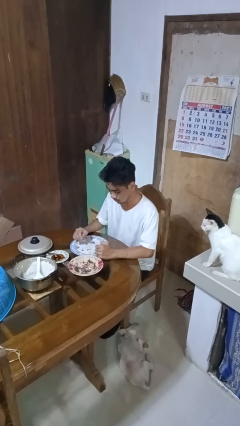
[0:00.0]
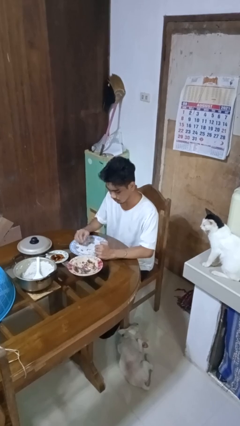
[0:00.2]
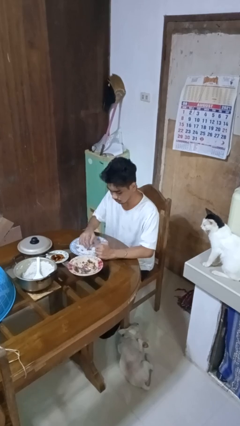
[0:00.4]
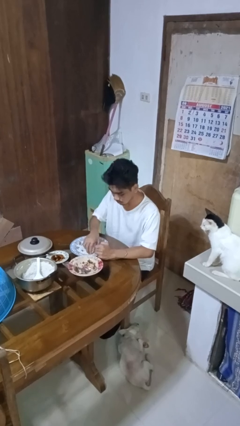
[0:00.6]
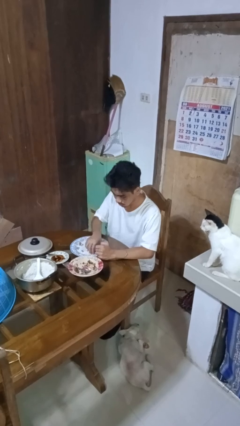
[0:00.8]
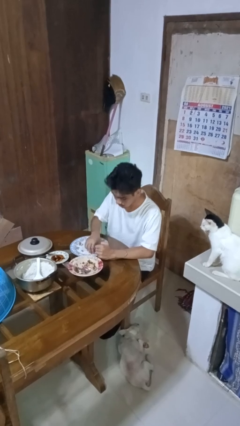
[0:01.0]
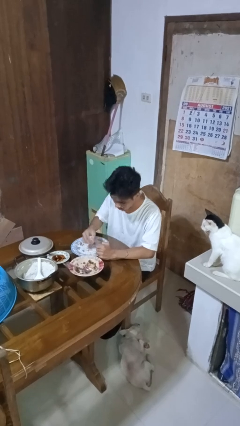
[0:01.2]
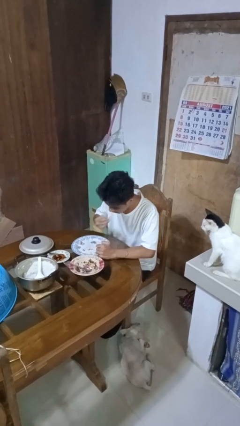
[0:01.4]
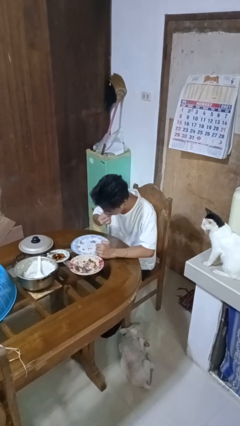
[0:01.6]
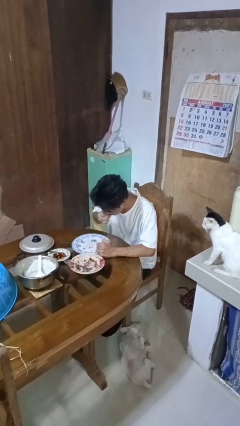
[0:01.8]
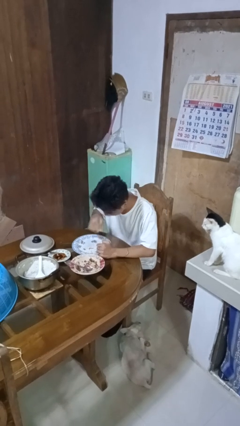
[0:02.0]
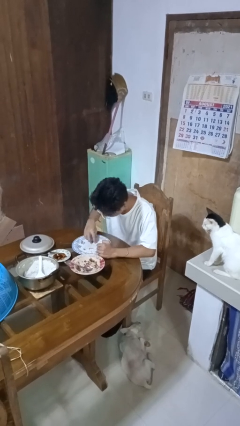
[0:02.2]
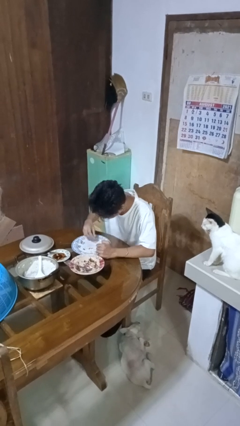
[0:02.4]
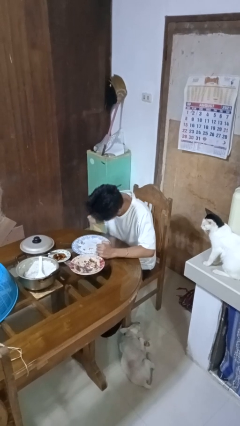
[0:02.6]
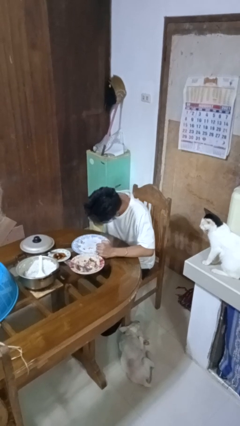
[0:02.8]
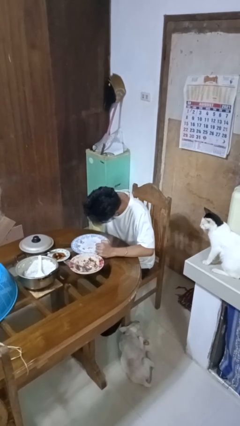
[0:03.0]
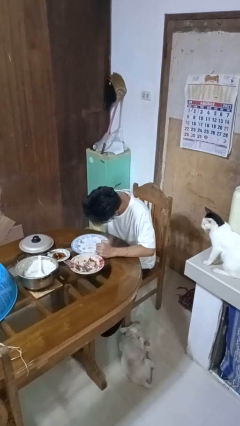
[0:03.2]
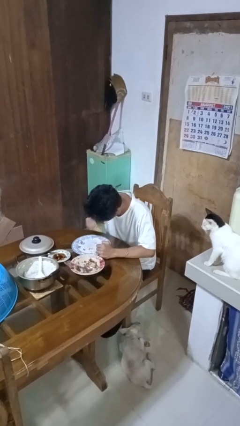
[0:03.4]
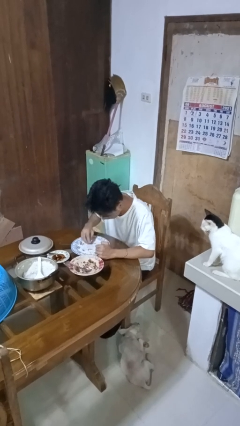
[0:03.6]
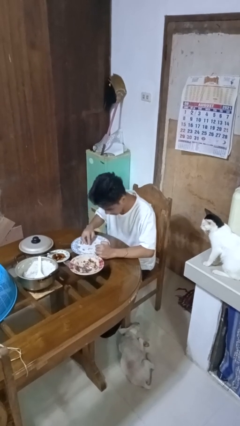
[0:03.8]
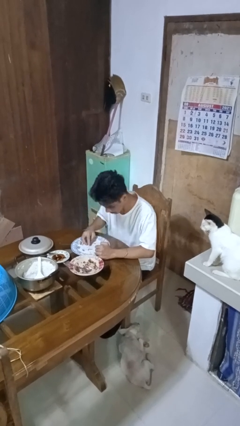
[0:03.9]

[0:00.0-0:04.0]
person eats with hands

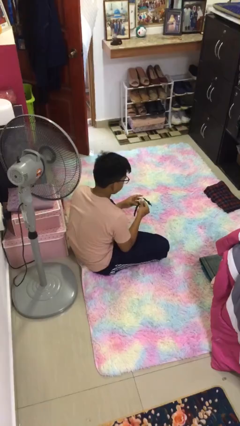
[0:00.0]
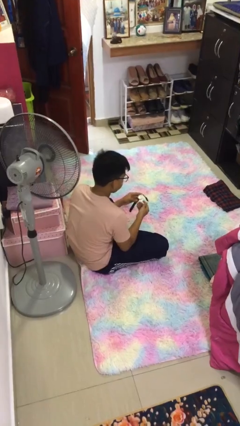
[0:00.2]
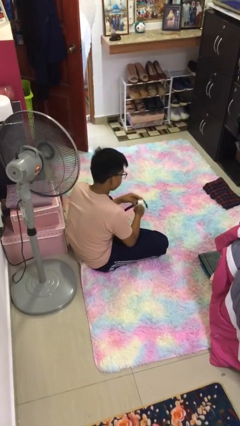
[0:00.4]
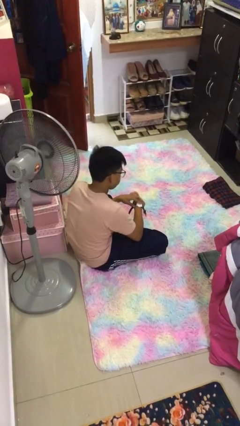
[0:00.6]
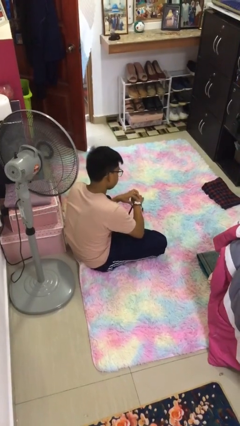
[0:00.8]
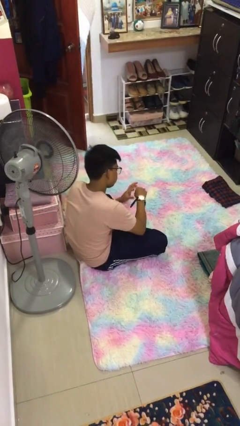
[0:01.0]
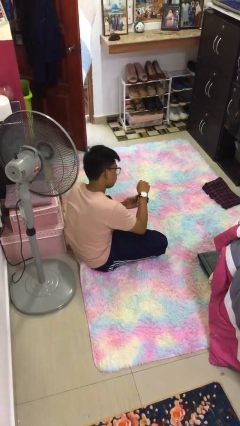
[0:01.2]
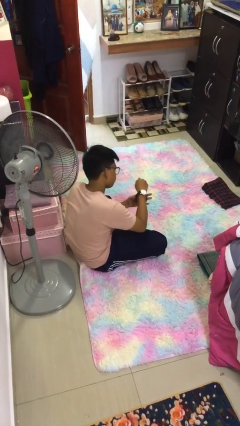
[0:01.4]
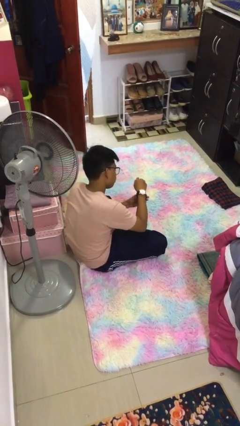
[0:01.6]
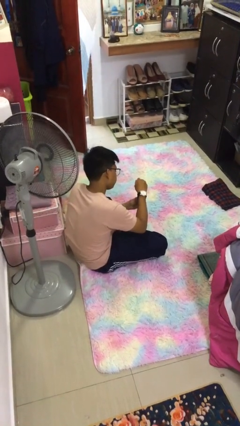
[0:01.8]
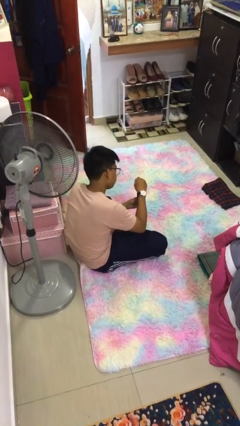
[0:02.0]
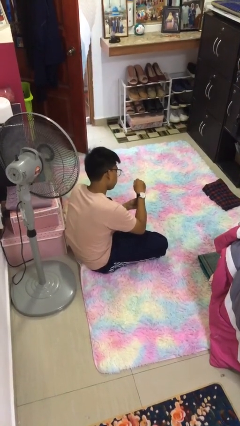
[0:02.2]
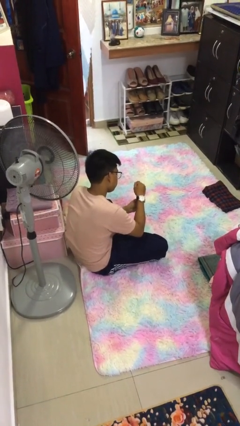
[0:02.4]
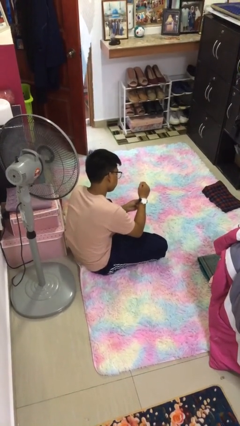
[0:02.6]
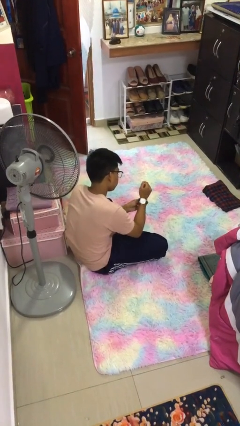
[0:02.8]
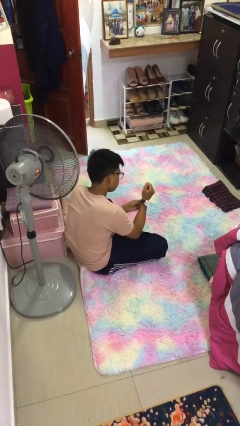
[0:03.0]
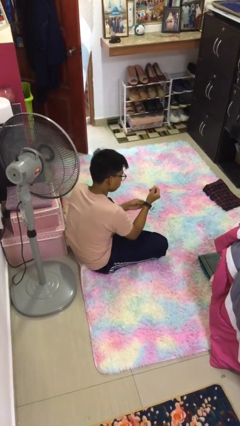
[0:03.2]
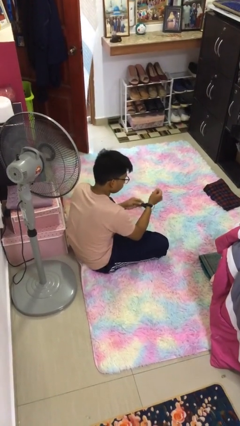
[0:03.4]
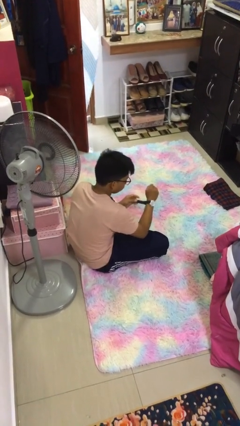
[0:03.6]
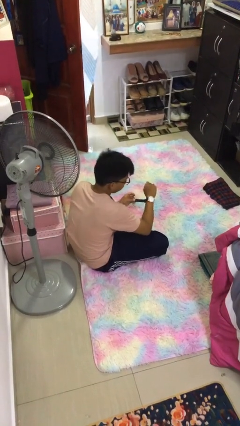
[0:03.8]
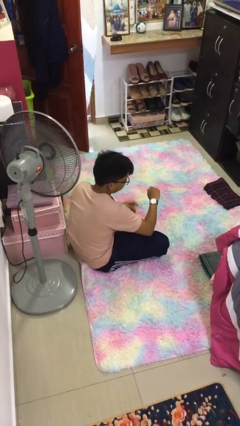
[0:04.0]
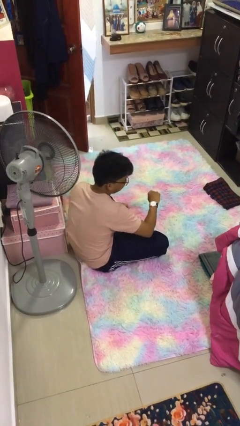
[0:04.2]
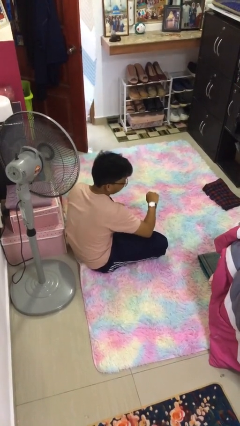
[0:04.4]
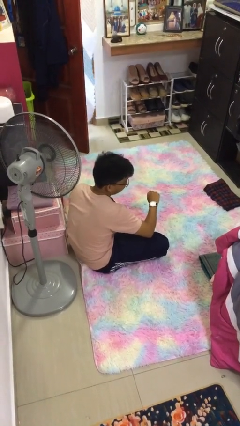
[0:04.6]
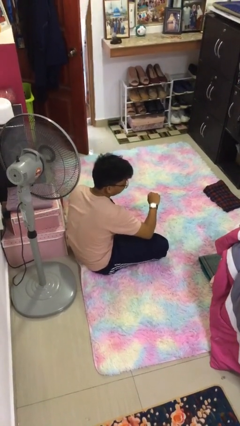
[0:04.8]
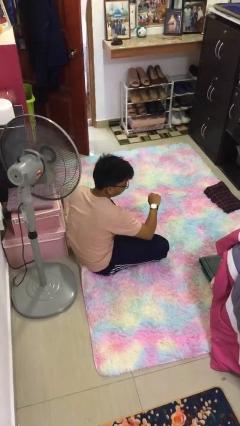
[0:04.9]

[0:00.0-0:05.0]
person puts on wristwatch

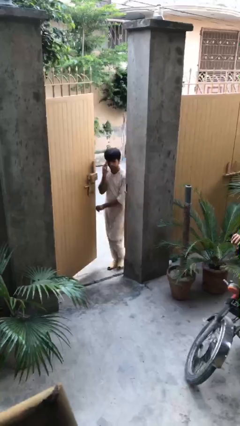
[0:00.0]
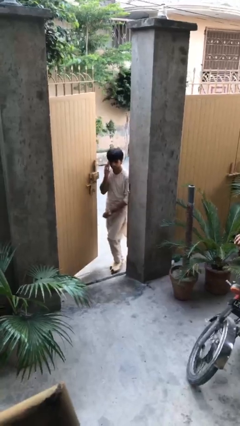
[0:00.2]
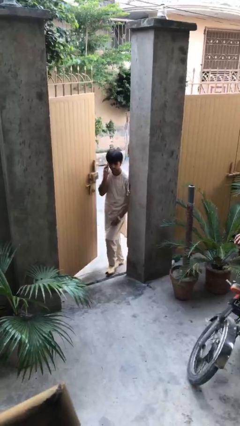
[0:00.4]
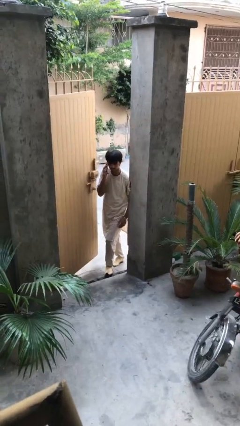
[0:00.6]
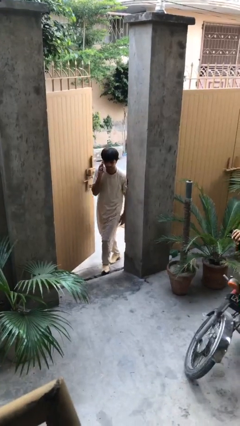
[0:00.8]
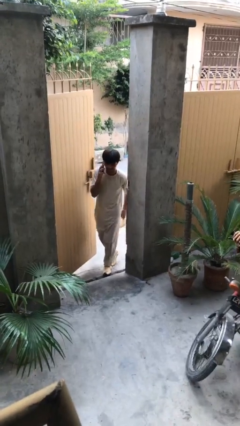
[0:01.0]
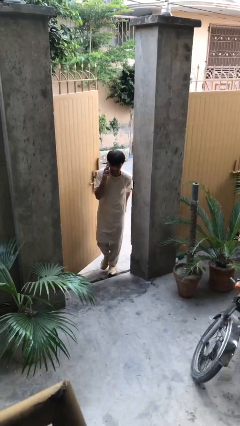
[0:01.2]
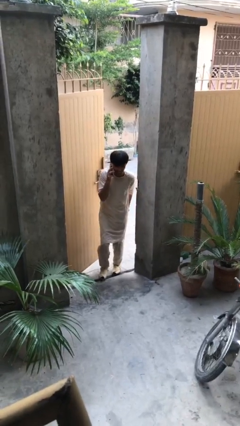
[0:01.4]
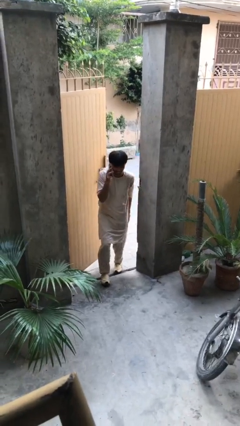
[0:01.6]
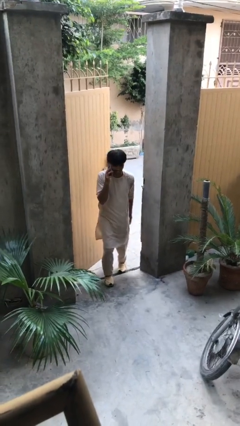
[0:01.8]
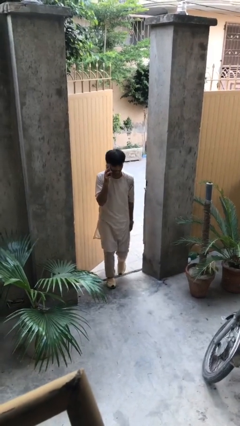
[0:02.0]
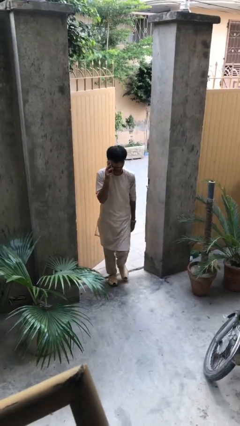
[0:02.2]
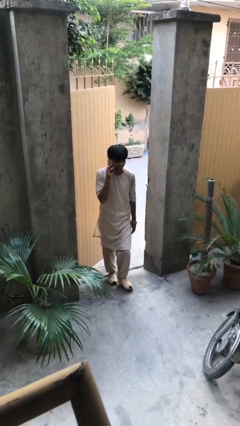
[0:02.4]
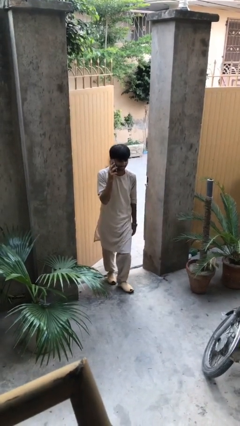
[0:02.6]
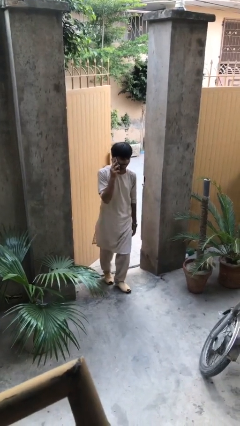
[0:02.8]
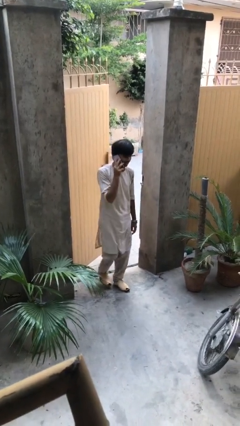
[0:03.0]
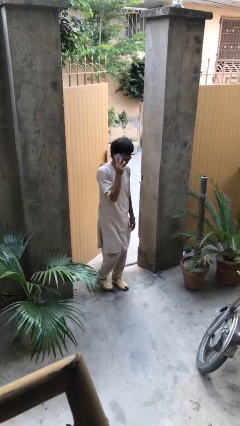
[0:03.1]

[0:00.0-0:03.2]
person enters scene through structure

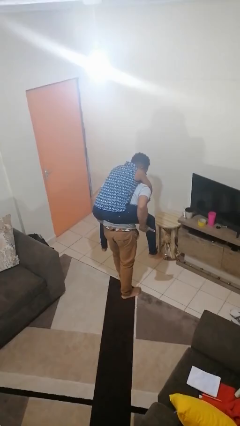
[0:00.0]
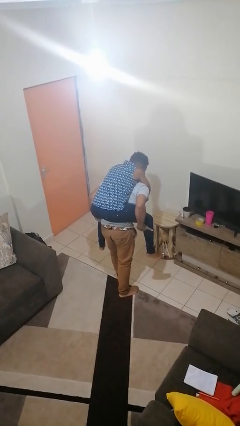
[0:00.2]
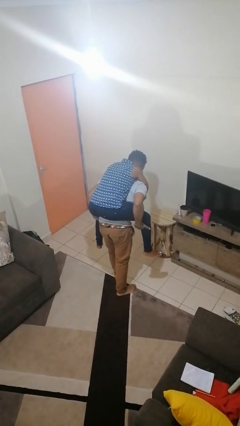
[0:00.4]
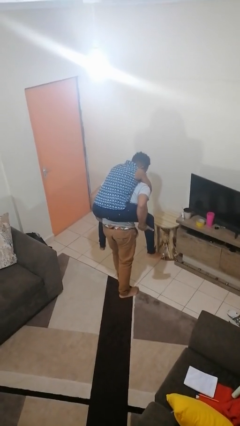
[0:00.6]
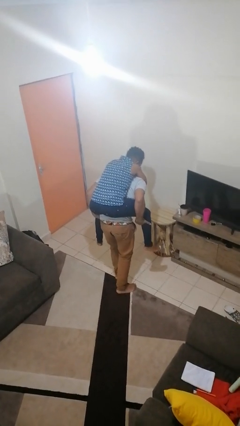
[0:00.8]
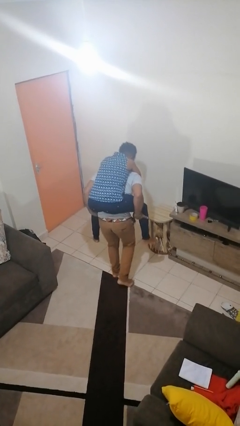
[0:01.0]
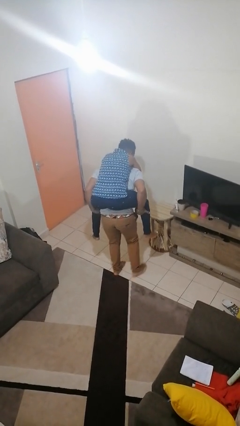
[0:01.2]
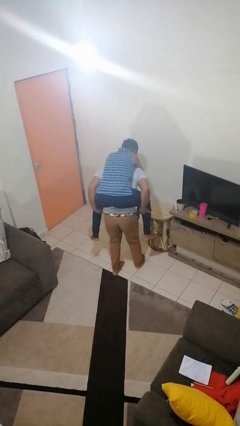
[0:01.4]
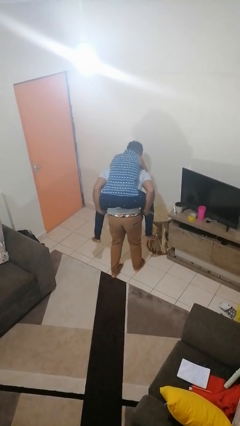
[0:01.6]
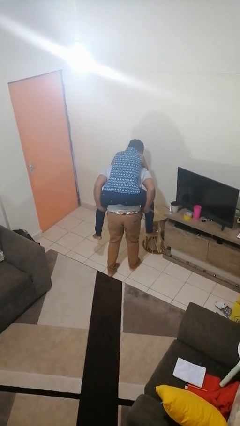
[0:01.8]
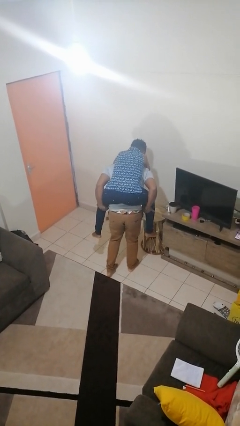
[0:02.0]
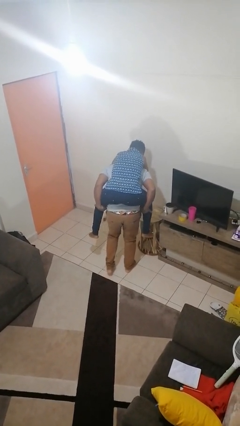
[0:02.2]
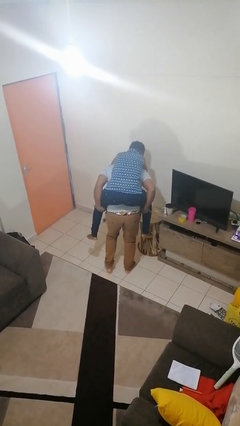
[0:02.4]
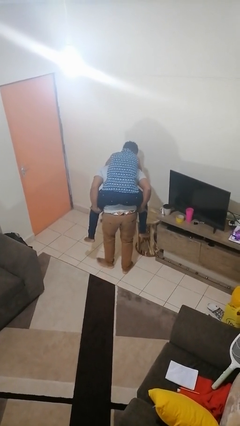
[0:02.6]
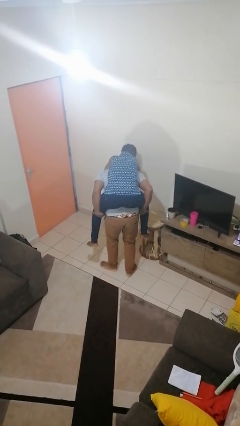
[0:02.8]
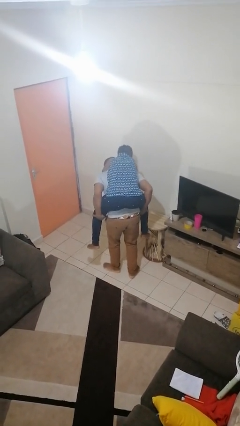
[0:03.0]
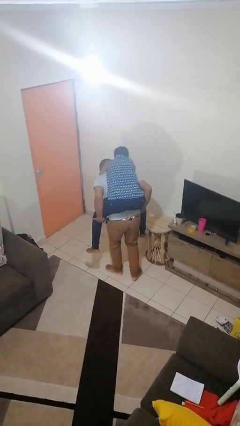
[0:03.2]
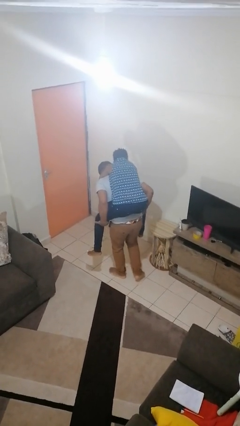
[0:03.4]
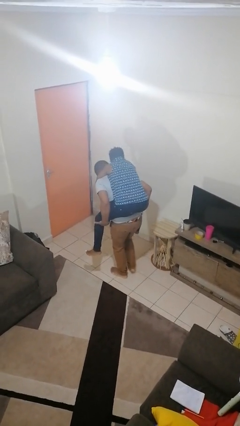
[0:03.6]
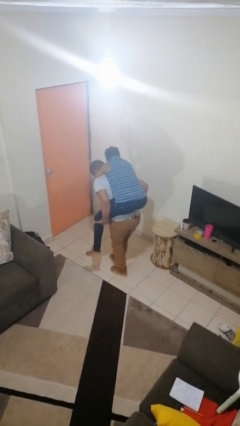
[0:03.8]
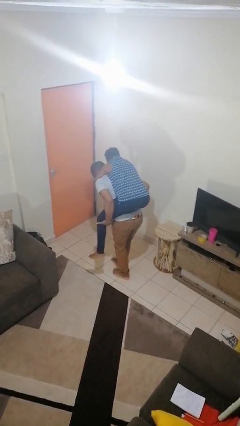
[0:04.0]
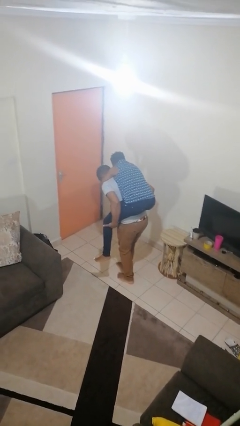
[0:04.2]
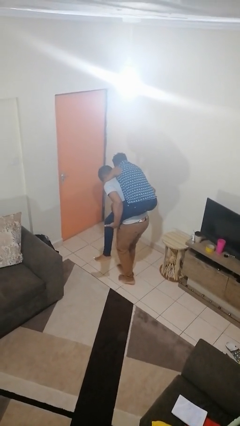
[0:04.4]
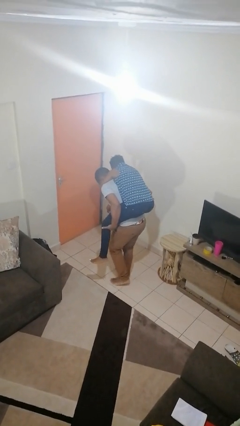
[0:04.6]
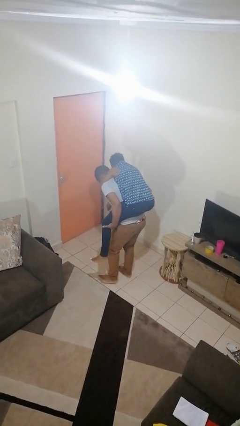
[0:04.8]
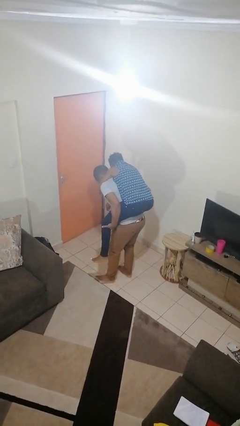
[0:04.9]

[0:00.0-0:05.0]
person carries person on back
